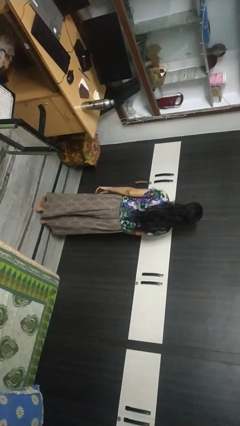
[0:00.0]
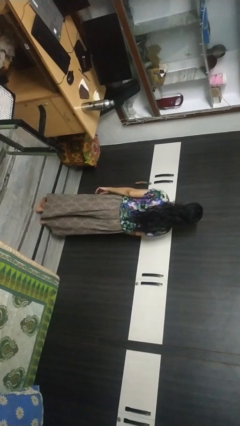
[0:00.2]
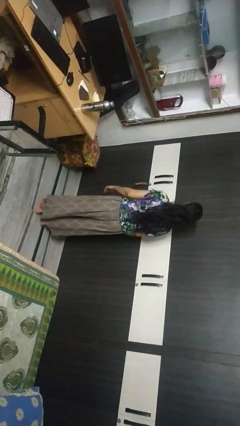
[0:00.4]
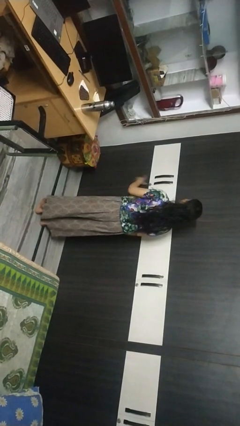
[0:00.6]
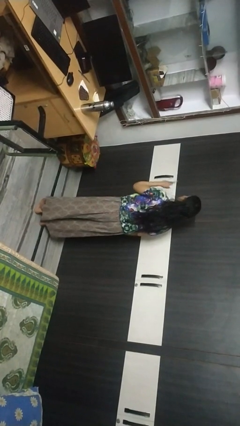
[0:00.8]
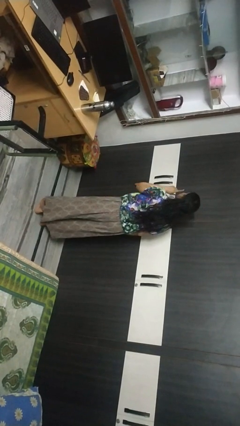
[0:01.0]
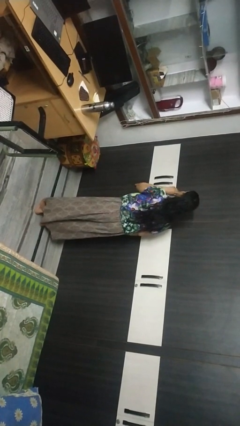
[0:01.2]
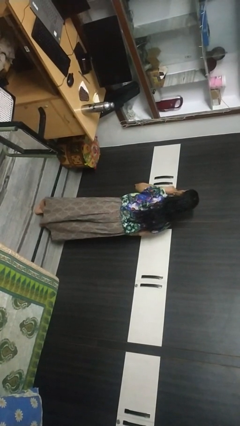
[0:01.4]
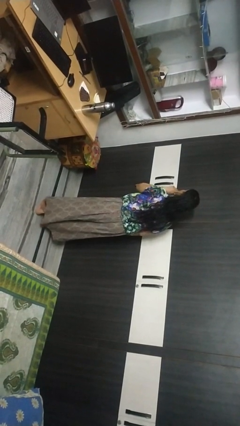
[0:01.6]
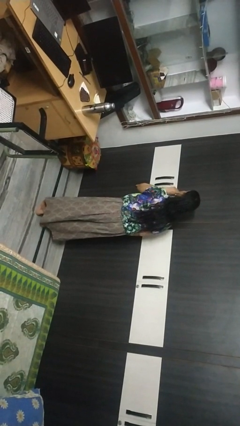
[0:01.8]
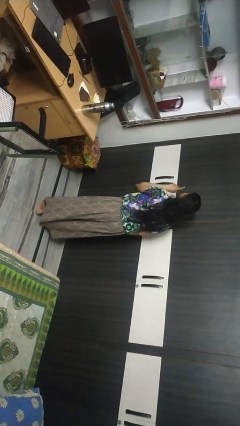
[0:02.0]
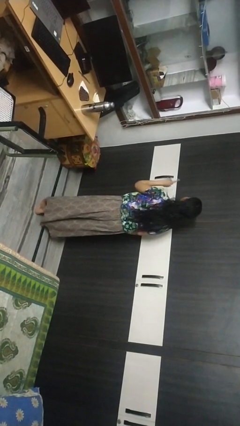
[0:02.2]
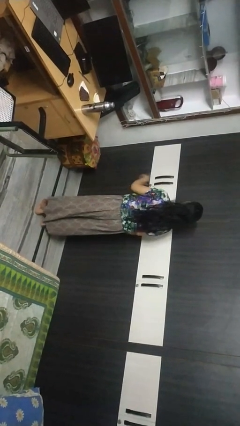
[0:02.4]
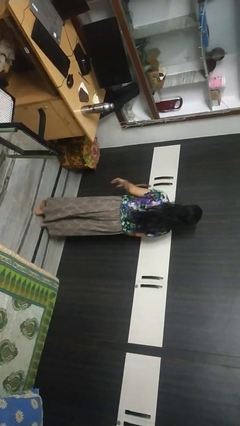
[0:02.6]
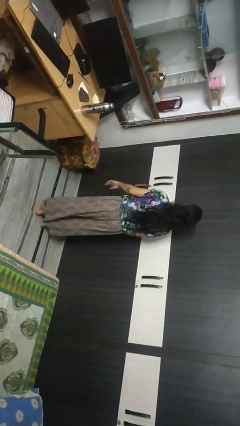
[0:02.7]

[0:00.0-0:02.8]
person gestures be quiet

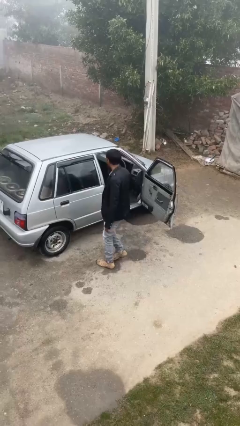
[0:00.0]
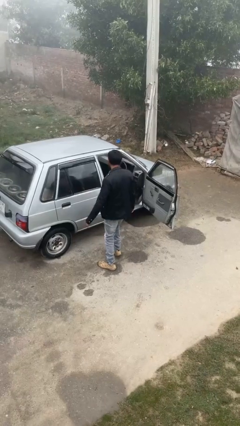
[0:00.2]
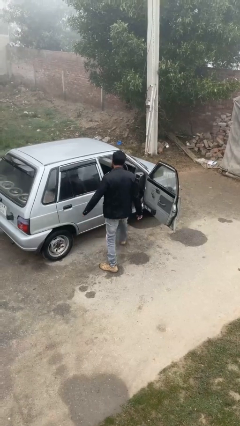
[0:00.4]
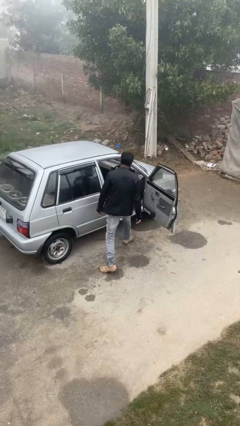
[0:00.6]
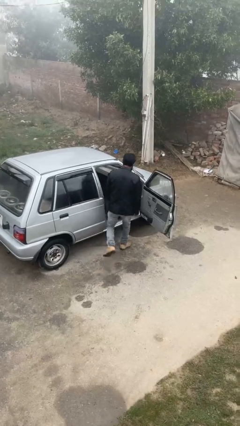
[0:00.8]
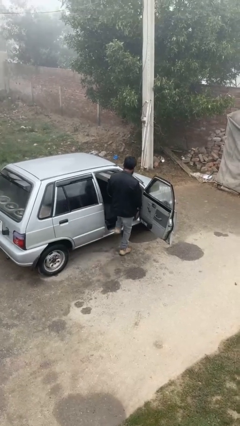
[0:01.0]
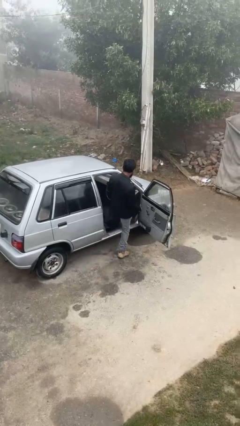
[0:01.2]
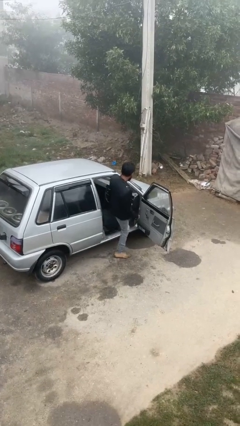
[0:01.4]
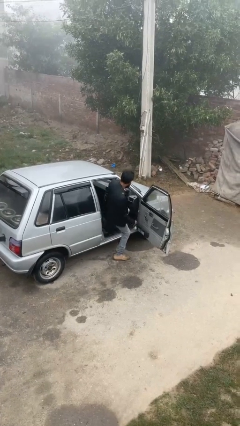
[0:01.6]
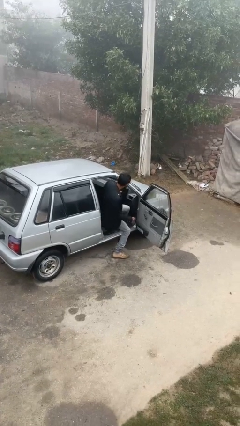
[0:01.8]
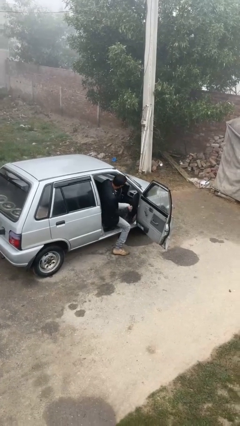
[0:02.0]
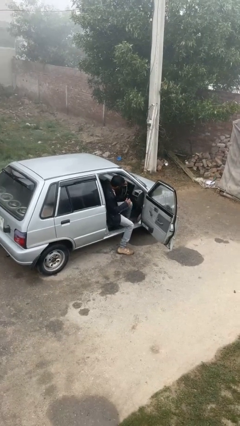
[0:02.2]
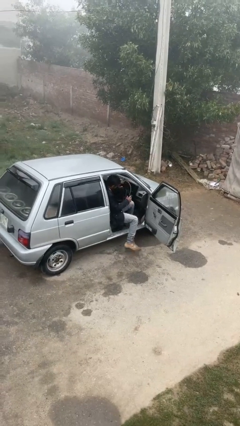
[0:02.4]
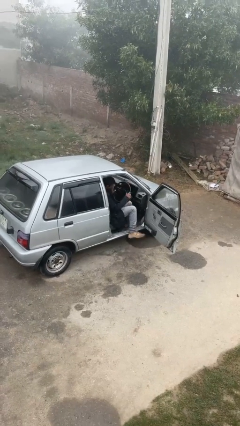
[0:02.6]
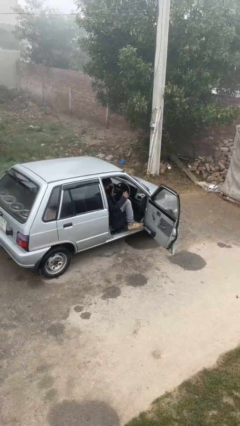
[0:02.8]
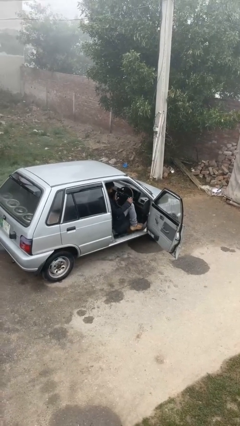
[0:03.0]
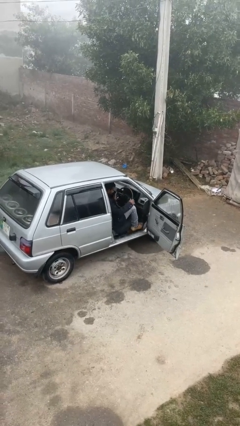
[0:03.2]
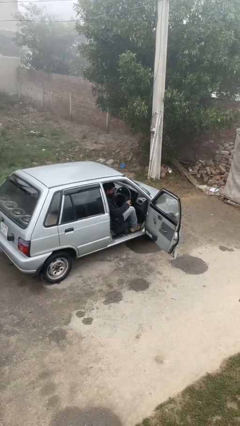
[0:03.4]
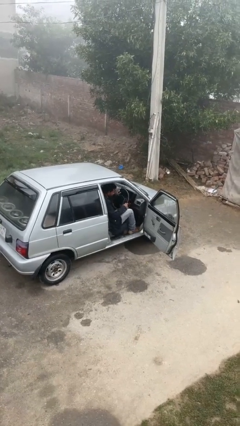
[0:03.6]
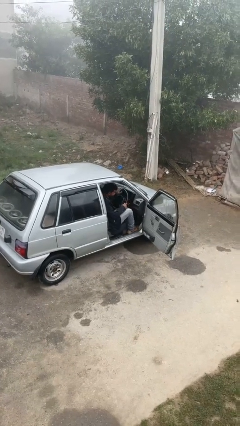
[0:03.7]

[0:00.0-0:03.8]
person enters car

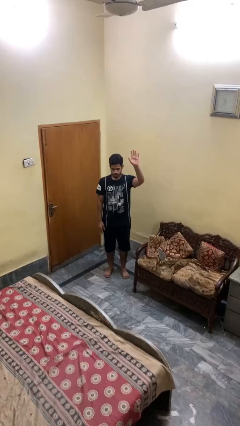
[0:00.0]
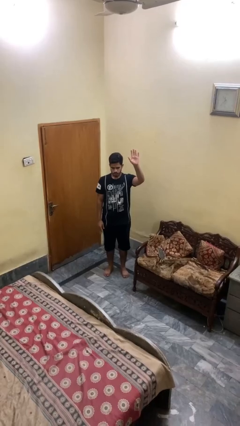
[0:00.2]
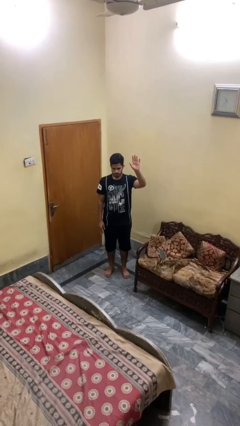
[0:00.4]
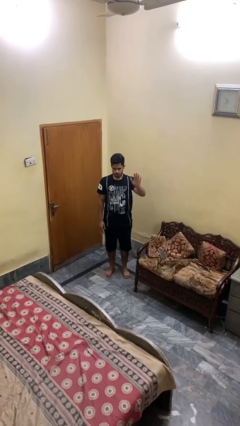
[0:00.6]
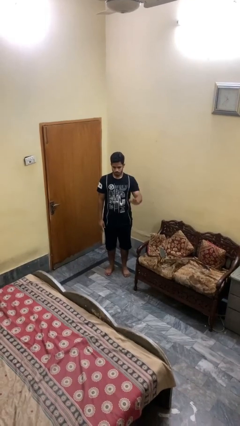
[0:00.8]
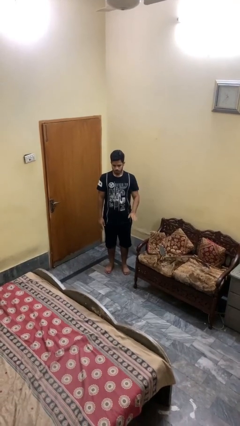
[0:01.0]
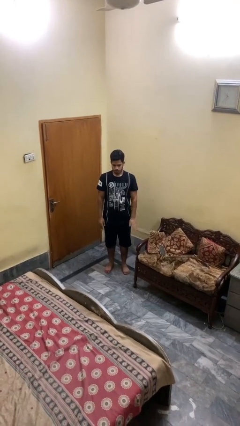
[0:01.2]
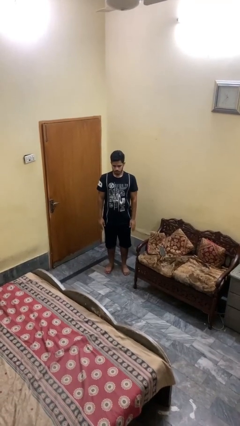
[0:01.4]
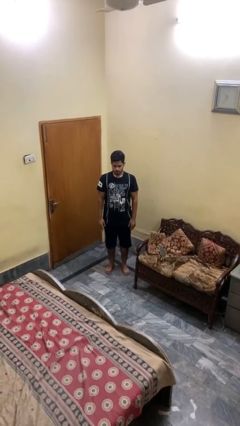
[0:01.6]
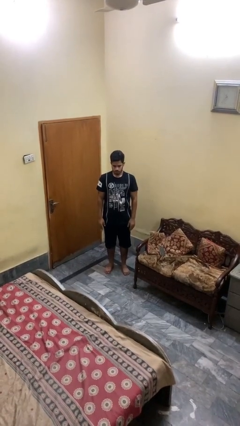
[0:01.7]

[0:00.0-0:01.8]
person gestures lower hand

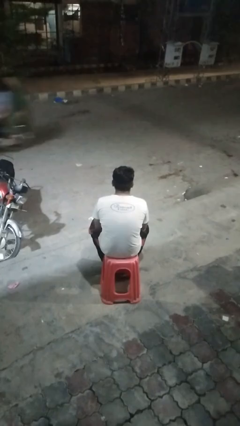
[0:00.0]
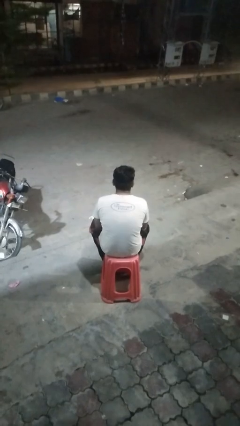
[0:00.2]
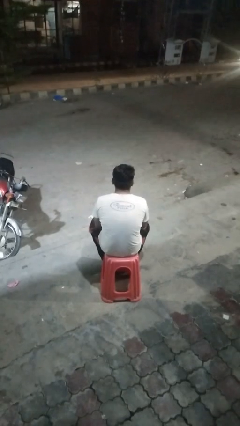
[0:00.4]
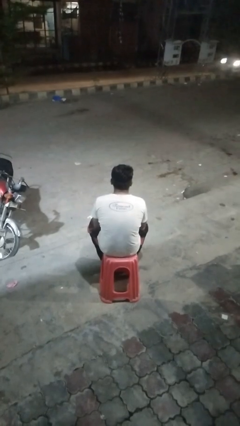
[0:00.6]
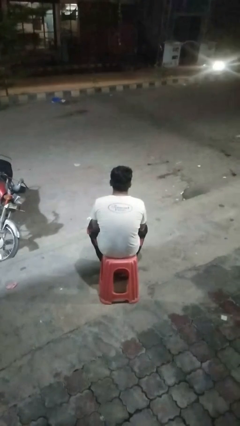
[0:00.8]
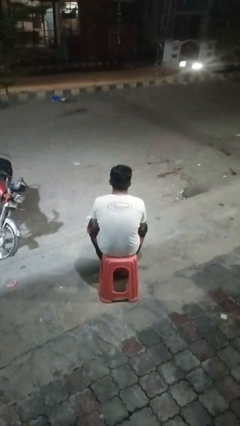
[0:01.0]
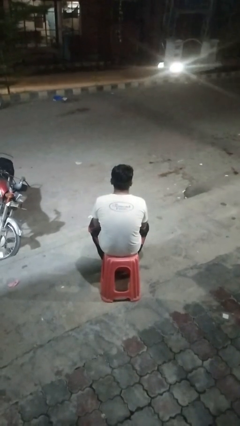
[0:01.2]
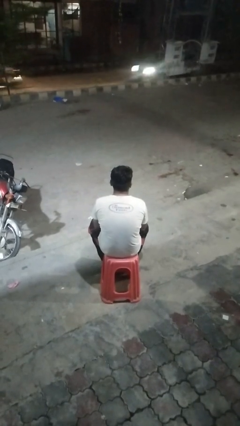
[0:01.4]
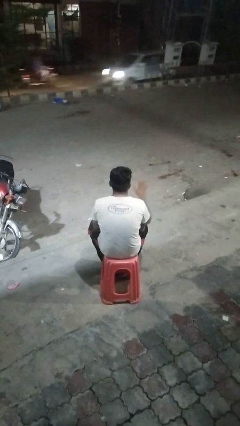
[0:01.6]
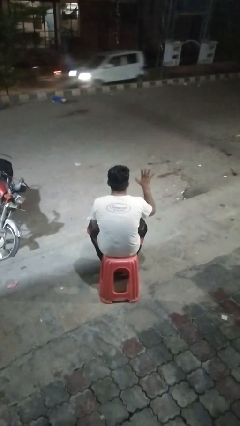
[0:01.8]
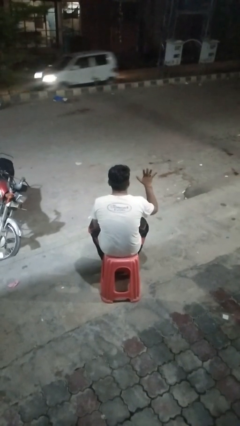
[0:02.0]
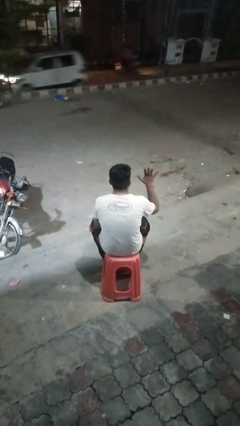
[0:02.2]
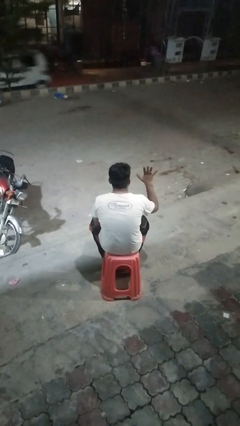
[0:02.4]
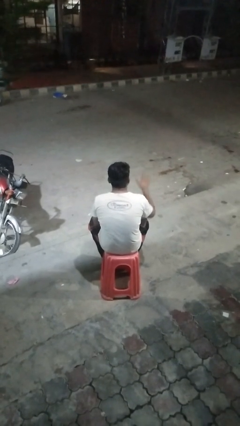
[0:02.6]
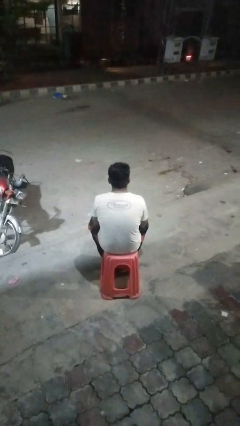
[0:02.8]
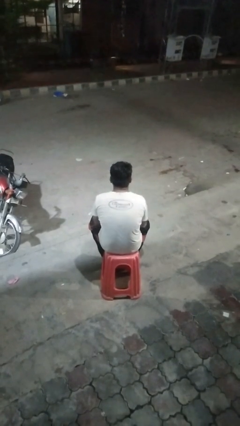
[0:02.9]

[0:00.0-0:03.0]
person gestures number five

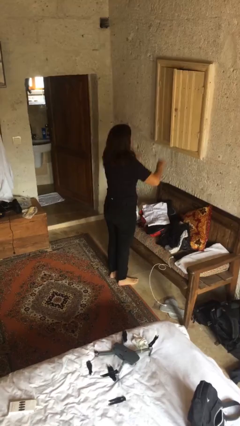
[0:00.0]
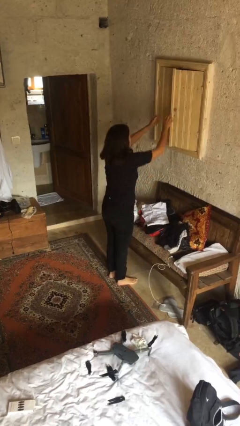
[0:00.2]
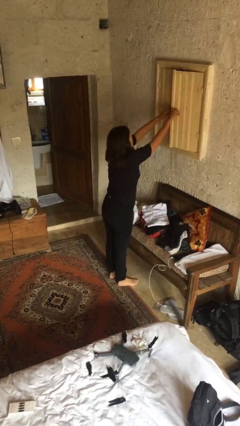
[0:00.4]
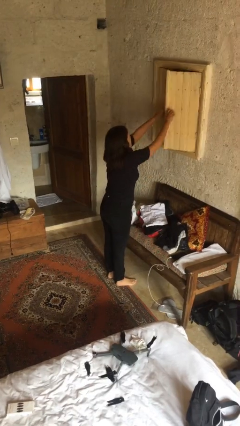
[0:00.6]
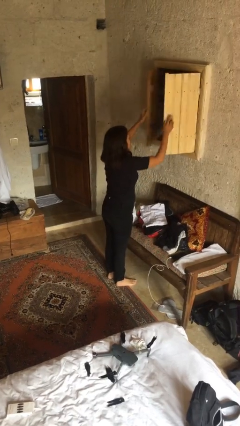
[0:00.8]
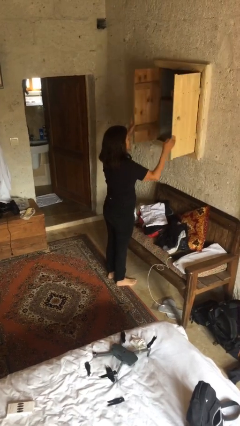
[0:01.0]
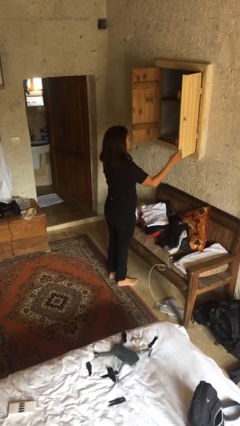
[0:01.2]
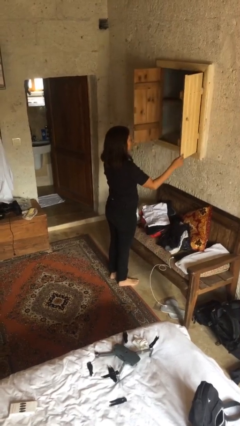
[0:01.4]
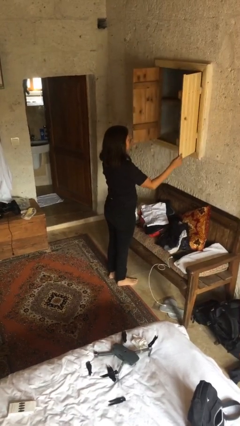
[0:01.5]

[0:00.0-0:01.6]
person opens dresser drawer

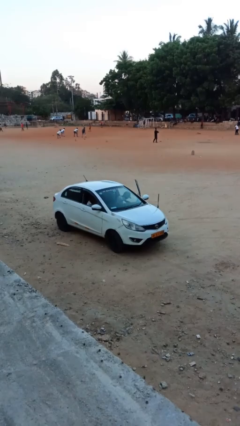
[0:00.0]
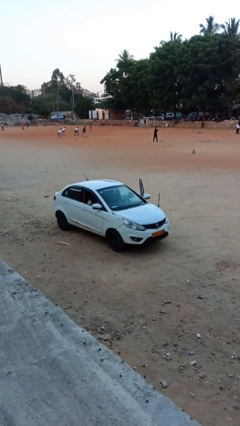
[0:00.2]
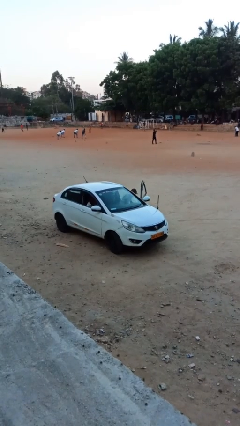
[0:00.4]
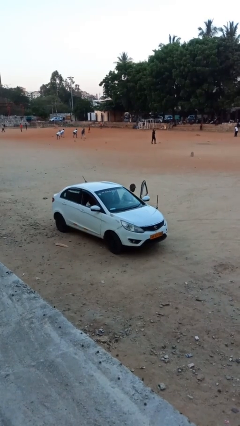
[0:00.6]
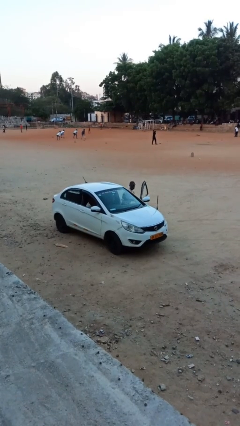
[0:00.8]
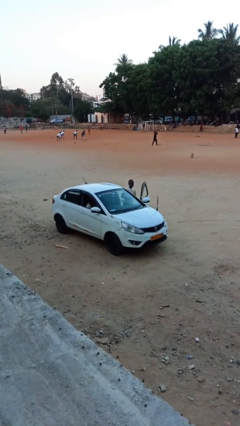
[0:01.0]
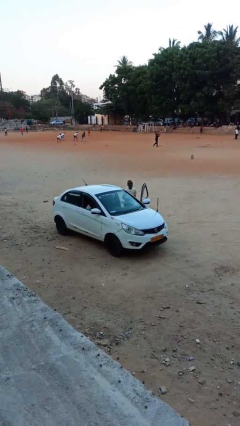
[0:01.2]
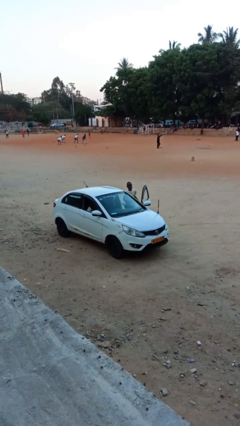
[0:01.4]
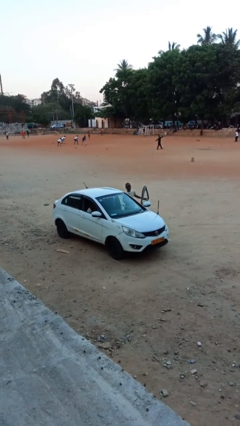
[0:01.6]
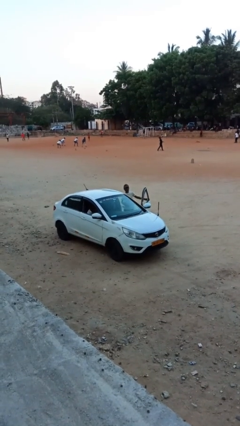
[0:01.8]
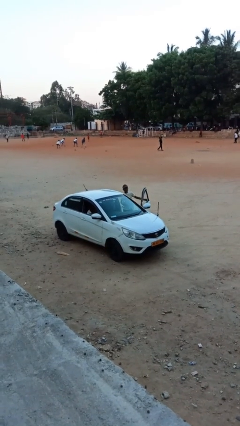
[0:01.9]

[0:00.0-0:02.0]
car drops off person

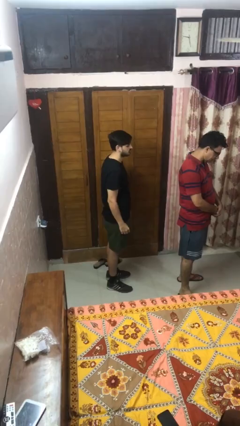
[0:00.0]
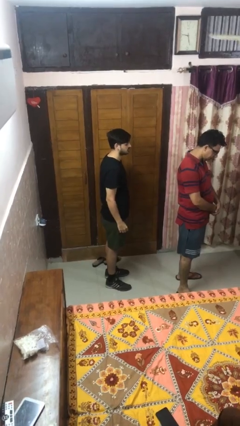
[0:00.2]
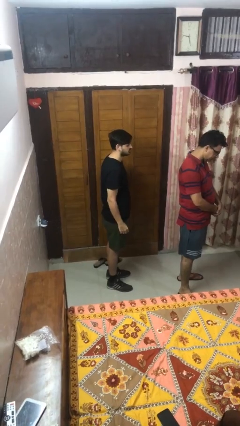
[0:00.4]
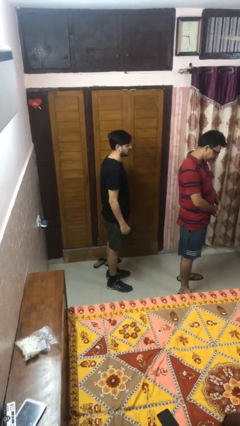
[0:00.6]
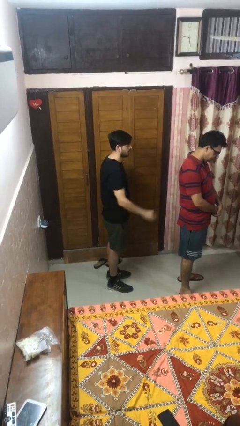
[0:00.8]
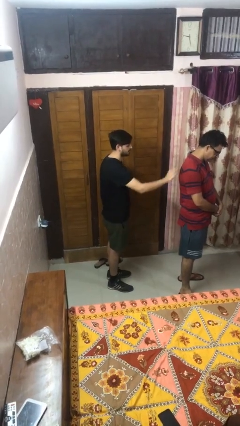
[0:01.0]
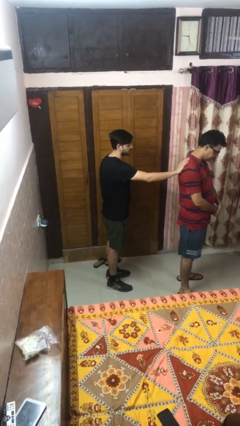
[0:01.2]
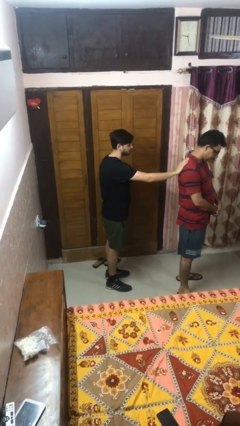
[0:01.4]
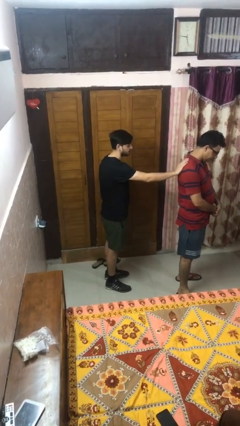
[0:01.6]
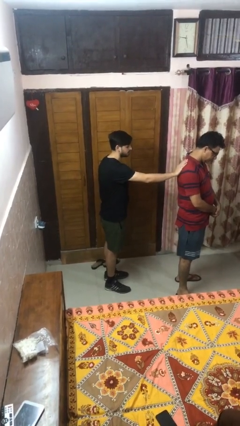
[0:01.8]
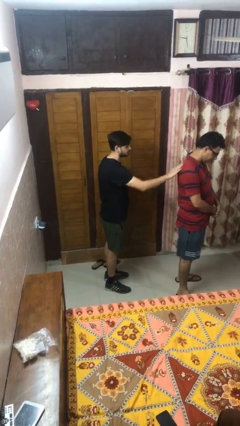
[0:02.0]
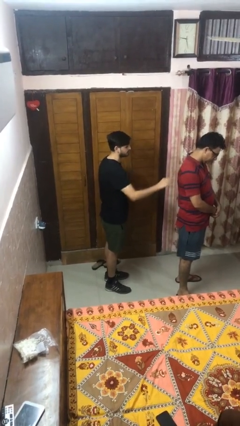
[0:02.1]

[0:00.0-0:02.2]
person touches back of person
